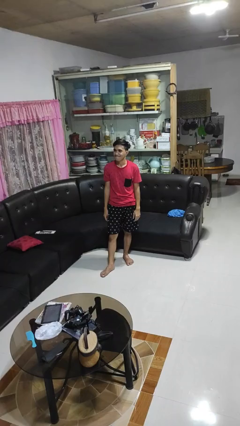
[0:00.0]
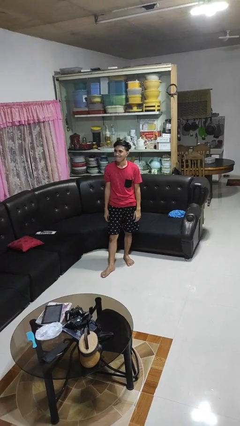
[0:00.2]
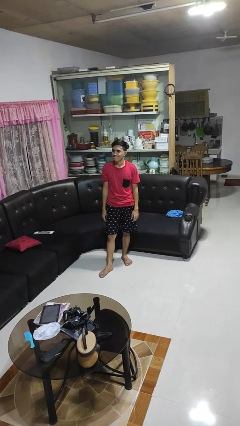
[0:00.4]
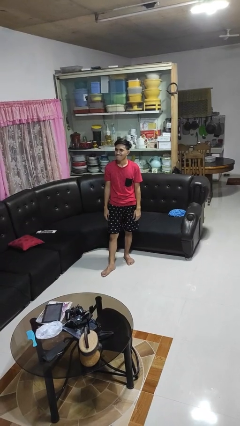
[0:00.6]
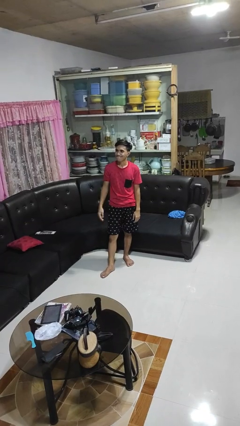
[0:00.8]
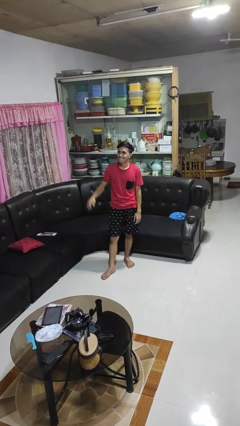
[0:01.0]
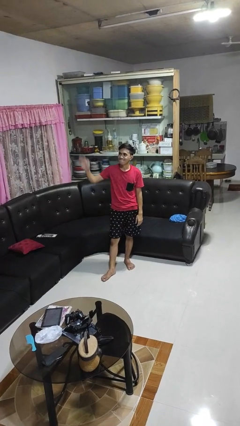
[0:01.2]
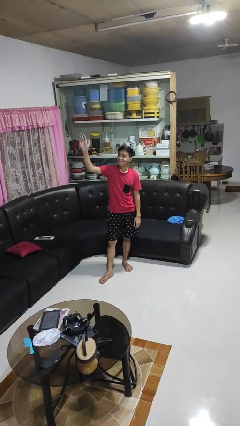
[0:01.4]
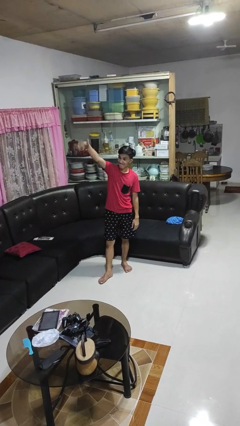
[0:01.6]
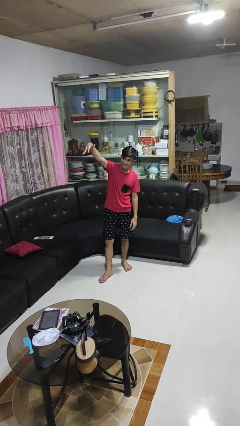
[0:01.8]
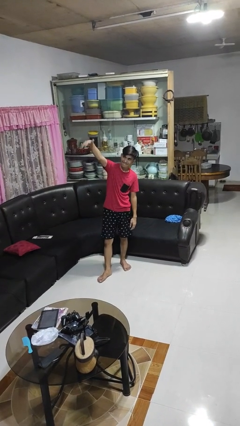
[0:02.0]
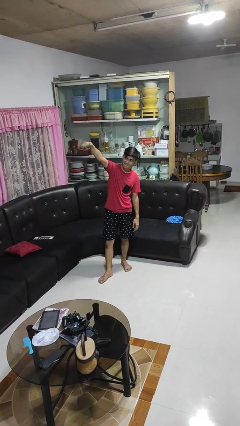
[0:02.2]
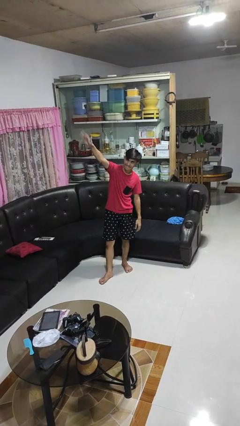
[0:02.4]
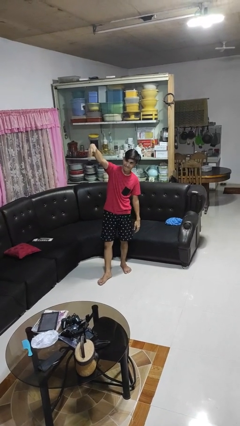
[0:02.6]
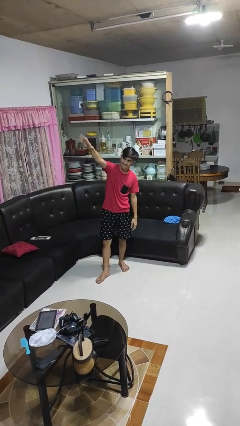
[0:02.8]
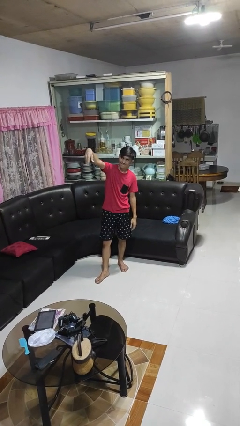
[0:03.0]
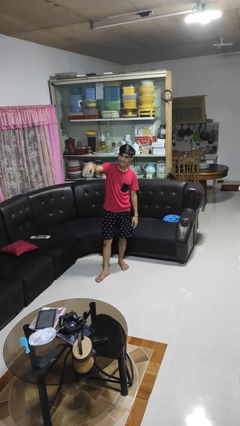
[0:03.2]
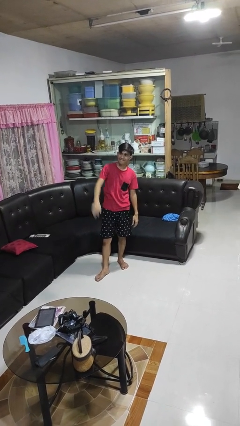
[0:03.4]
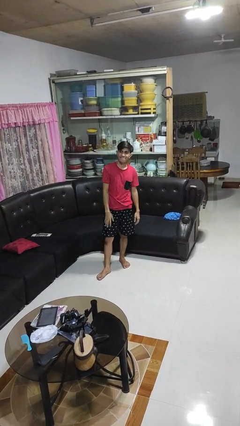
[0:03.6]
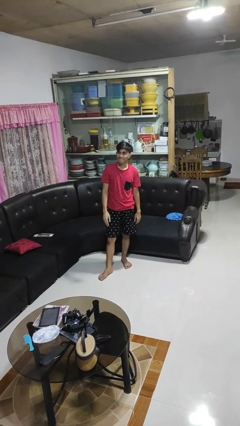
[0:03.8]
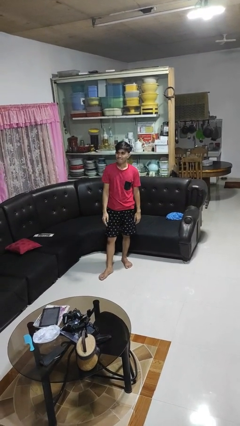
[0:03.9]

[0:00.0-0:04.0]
person gestures come here

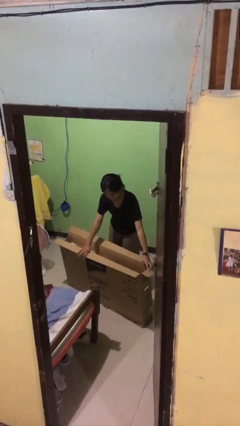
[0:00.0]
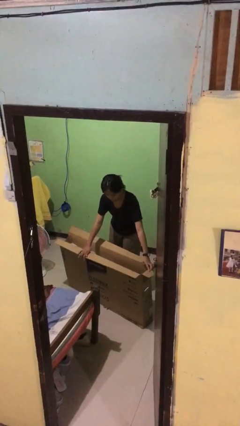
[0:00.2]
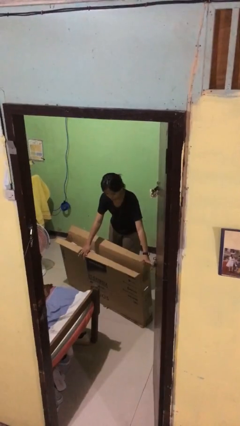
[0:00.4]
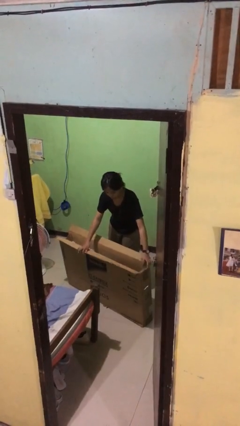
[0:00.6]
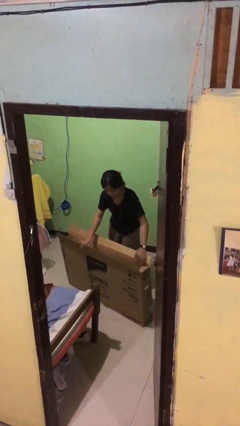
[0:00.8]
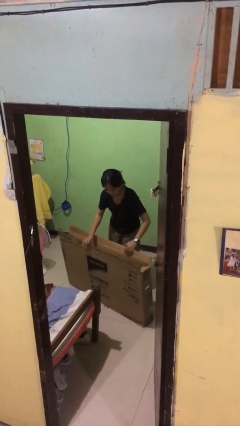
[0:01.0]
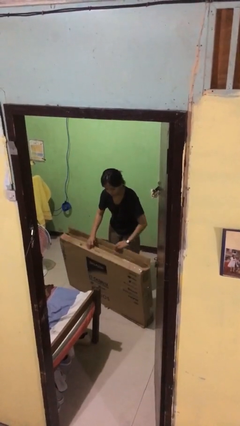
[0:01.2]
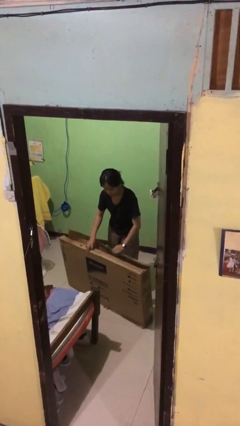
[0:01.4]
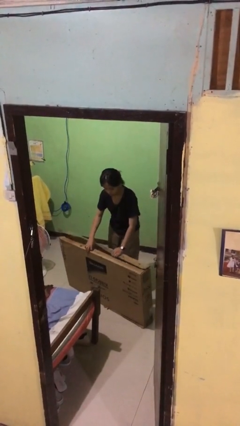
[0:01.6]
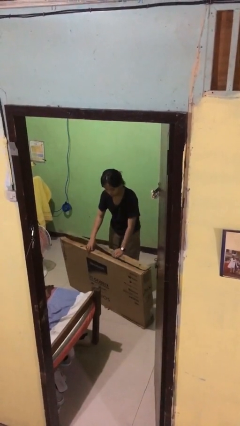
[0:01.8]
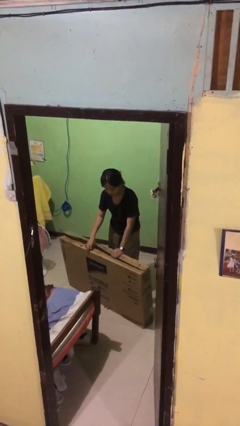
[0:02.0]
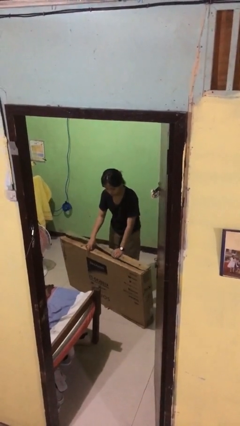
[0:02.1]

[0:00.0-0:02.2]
person closes box

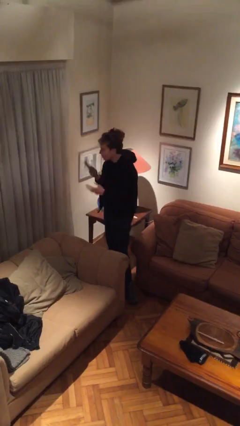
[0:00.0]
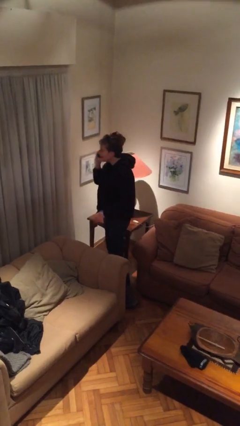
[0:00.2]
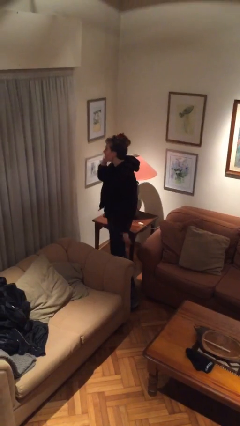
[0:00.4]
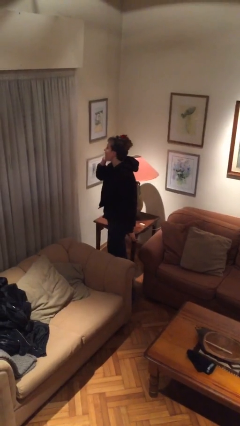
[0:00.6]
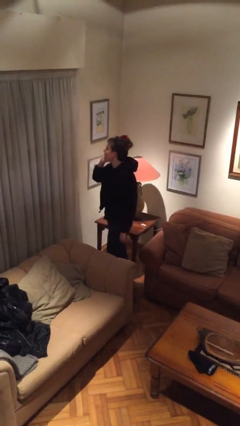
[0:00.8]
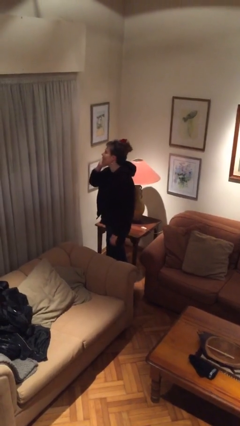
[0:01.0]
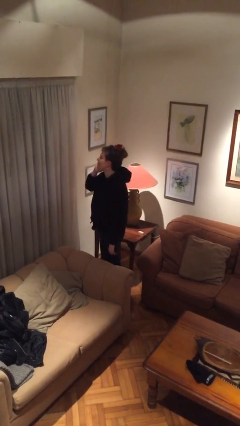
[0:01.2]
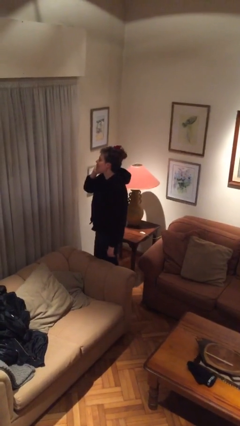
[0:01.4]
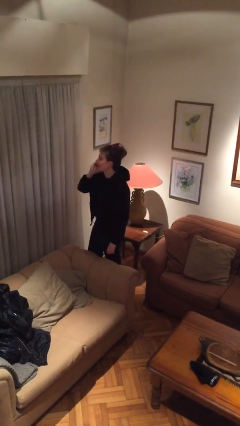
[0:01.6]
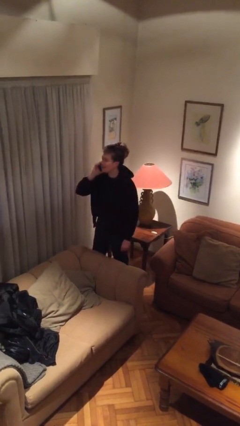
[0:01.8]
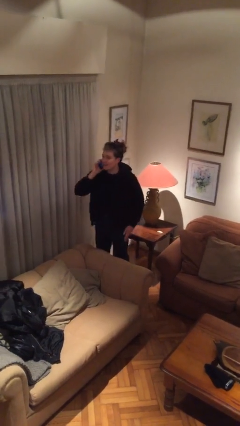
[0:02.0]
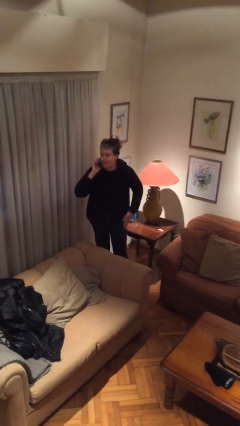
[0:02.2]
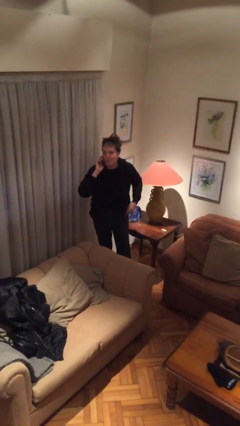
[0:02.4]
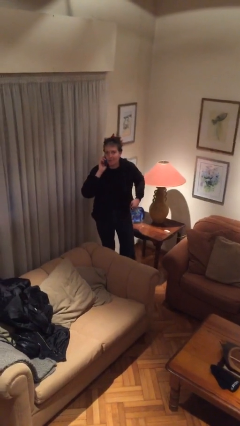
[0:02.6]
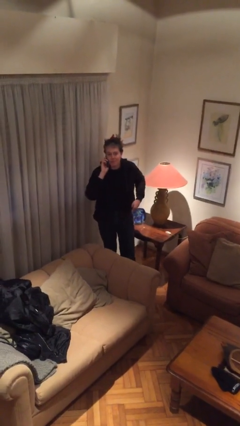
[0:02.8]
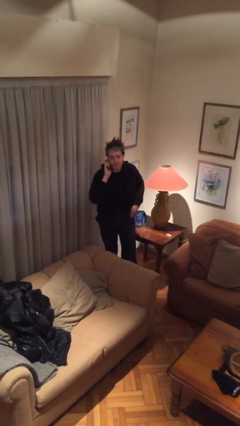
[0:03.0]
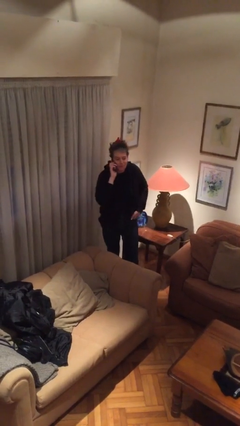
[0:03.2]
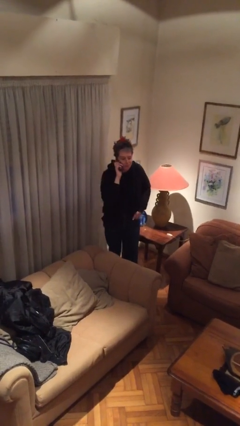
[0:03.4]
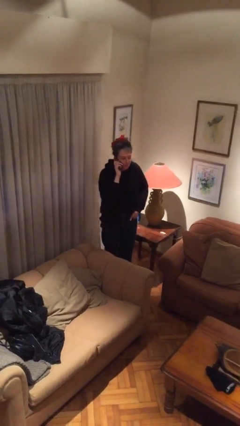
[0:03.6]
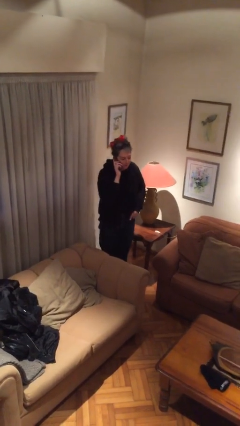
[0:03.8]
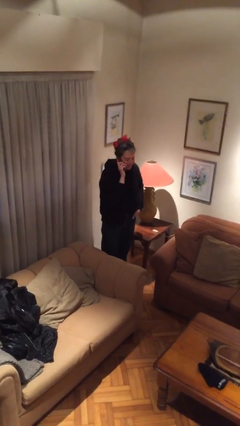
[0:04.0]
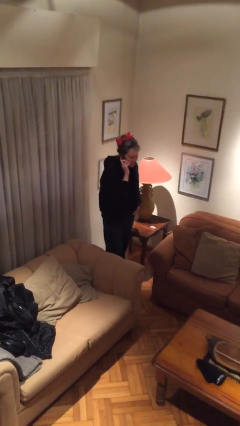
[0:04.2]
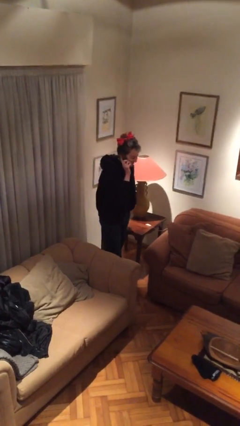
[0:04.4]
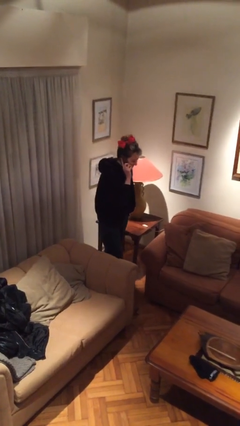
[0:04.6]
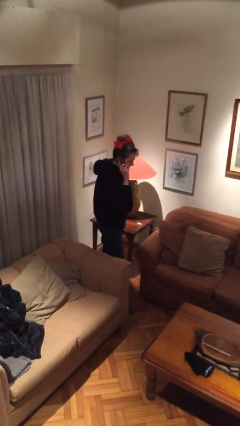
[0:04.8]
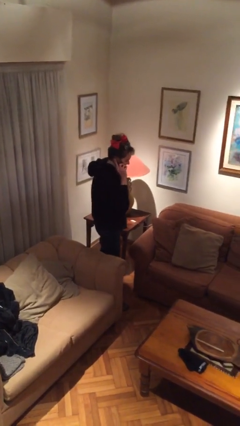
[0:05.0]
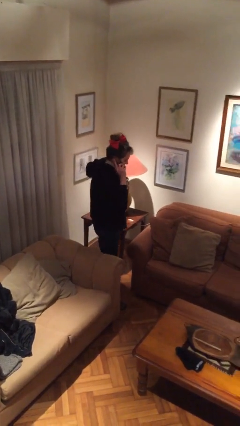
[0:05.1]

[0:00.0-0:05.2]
person talks on phone

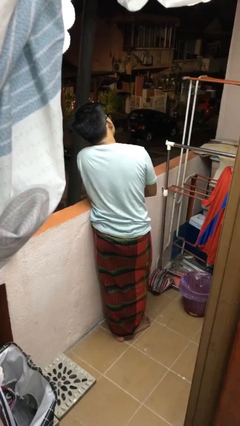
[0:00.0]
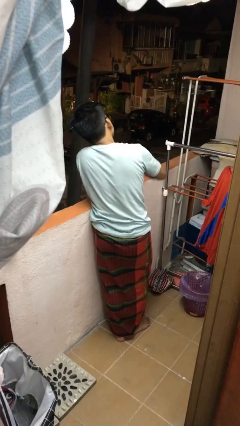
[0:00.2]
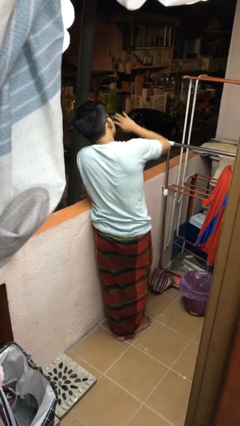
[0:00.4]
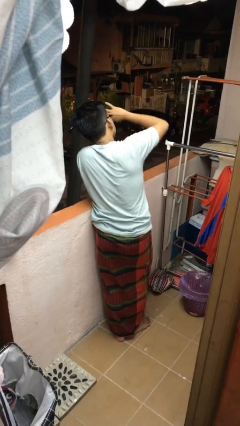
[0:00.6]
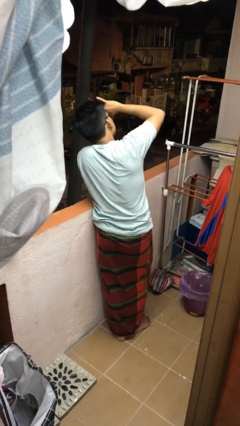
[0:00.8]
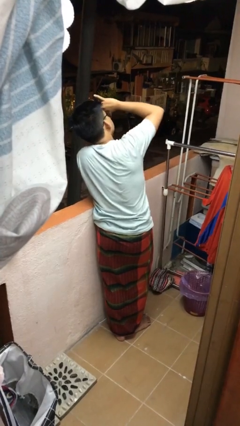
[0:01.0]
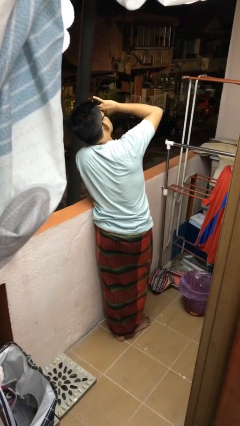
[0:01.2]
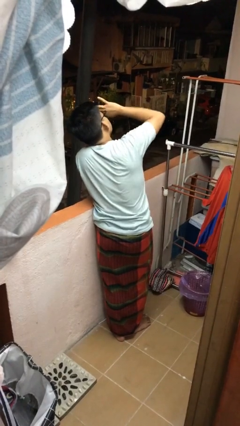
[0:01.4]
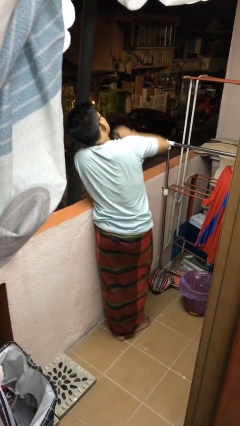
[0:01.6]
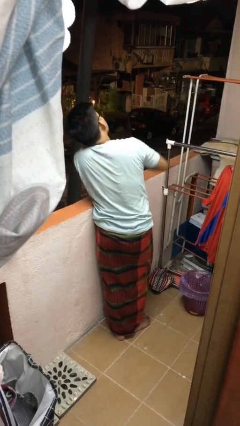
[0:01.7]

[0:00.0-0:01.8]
person shades eyes

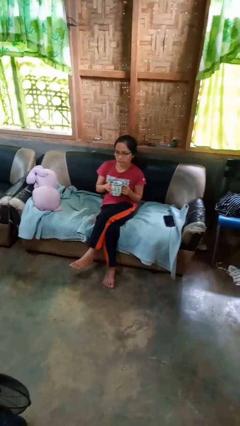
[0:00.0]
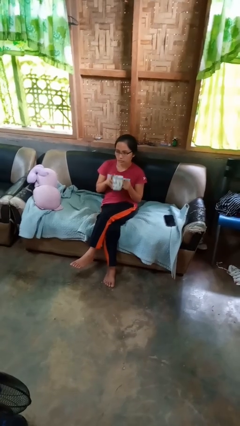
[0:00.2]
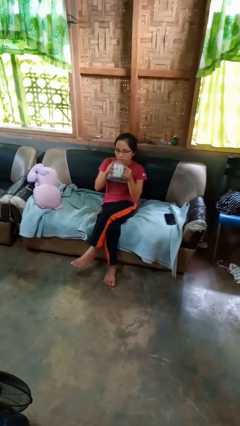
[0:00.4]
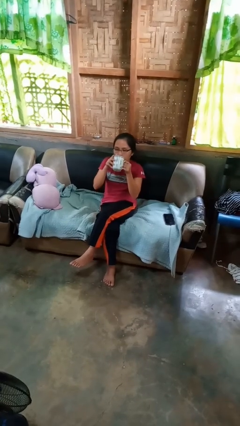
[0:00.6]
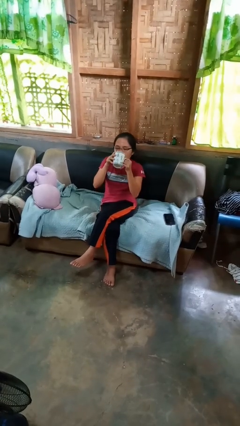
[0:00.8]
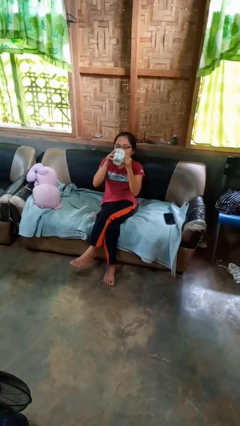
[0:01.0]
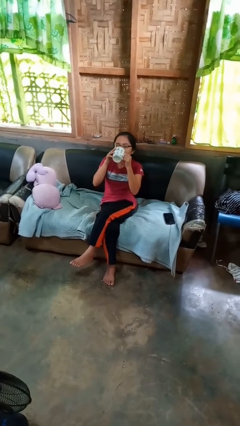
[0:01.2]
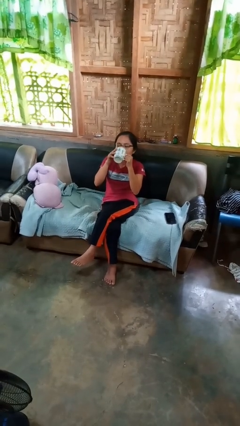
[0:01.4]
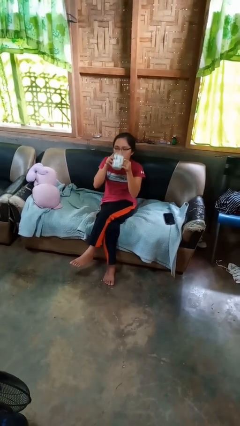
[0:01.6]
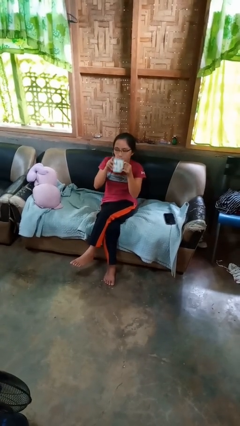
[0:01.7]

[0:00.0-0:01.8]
person drinks from mug

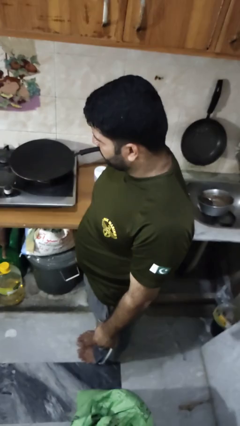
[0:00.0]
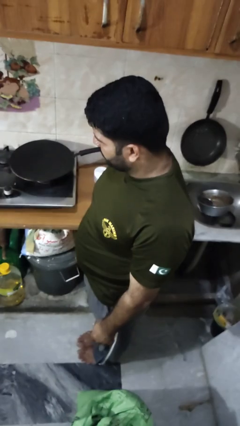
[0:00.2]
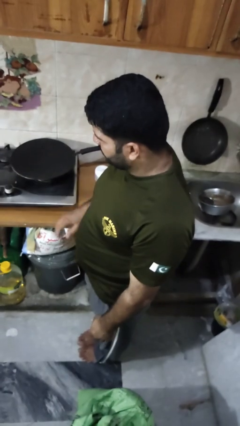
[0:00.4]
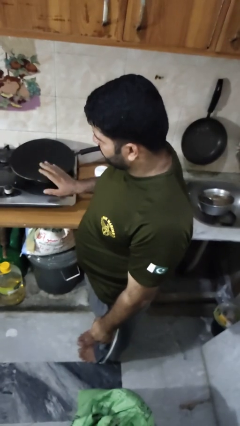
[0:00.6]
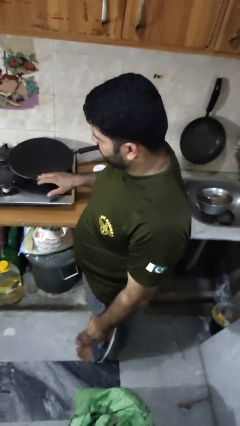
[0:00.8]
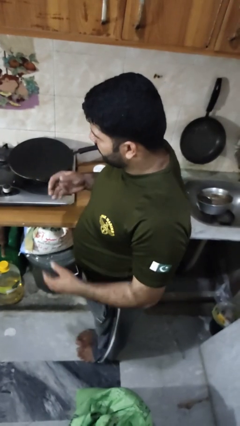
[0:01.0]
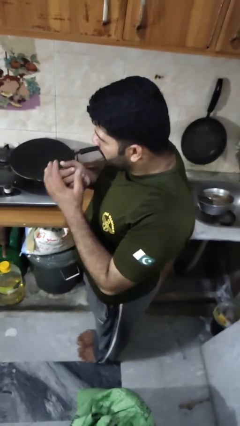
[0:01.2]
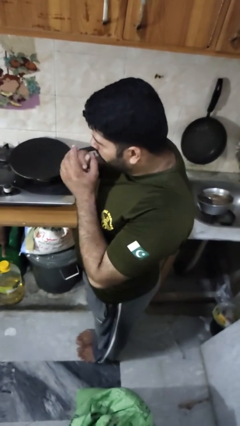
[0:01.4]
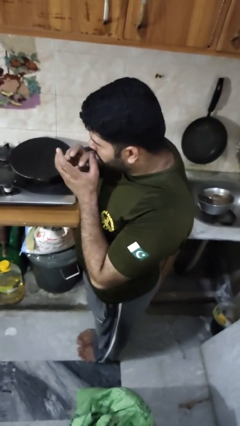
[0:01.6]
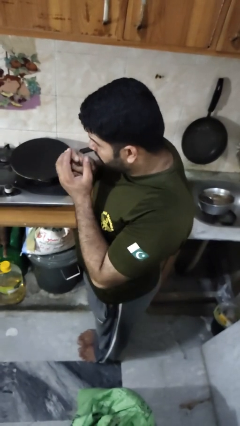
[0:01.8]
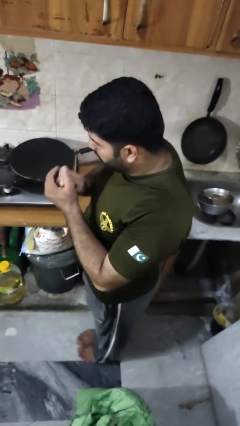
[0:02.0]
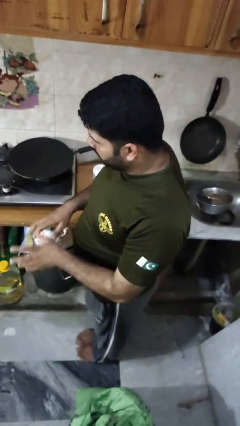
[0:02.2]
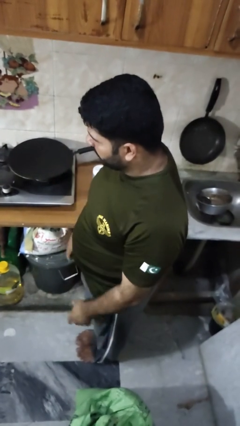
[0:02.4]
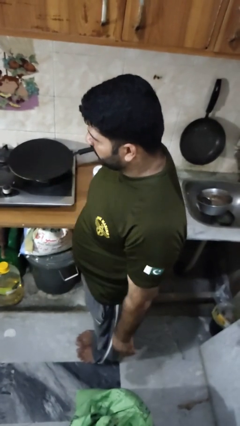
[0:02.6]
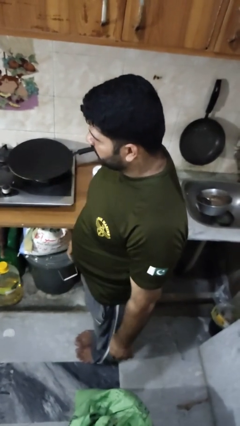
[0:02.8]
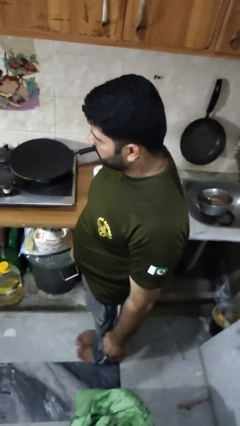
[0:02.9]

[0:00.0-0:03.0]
person burns hand
